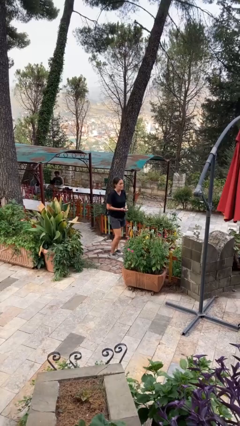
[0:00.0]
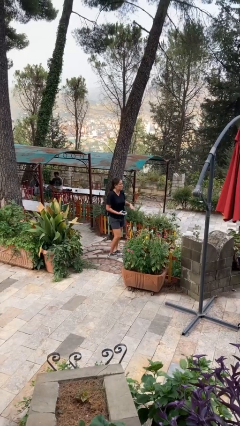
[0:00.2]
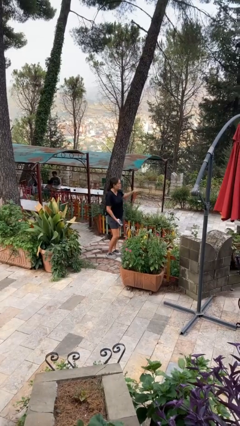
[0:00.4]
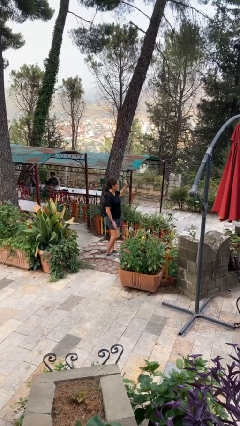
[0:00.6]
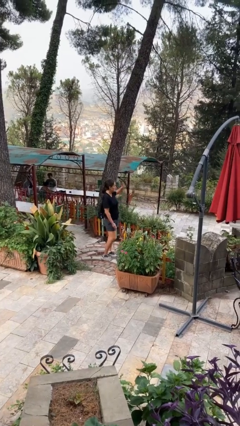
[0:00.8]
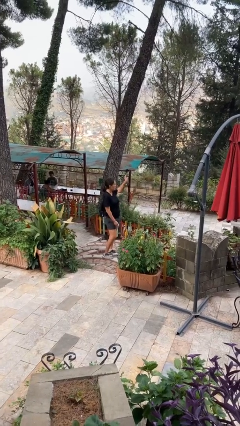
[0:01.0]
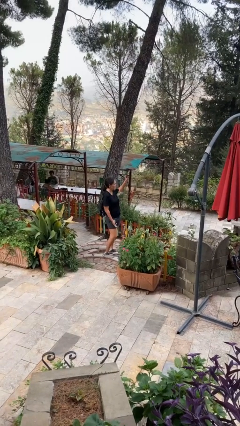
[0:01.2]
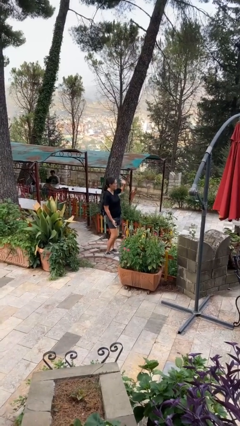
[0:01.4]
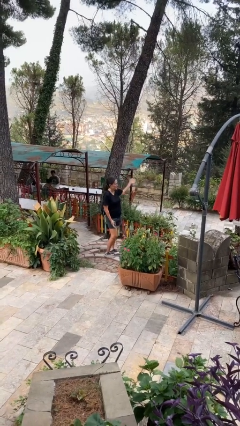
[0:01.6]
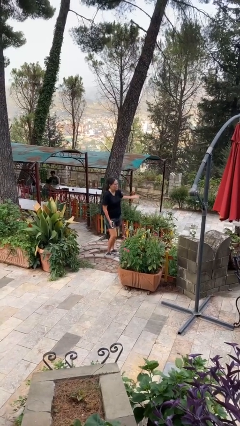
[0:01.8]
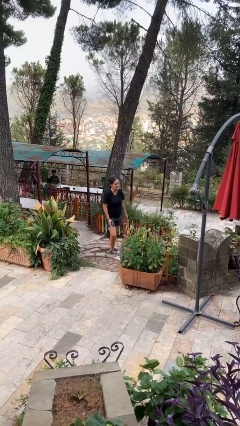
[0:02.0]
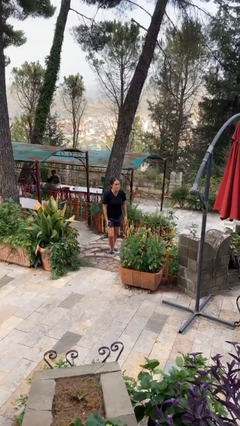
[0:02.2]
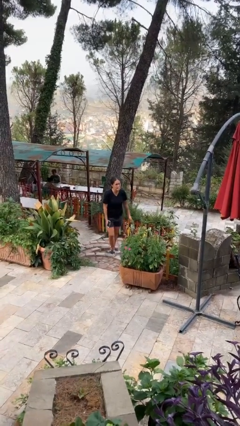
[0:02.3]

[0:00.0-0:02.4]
person waves at person

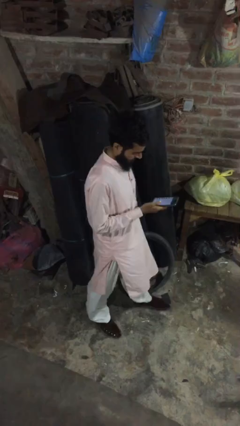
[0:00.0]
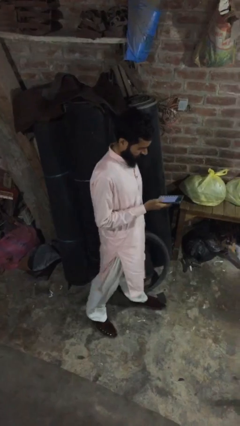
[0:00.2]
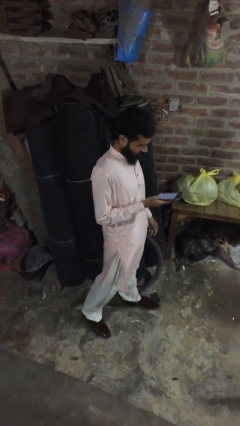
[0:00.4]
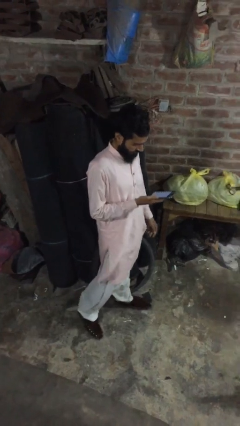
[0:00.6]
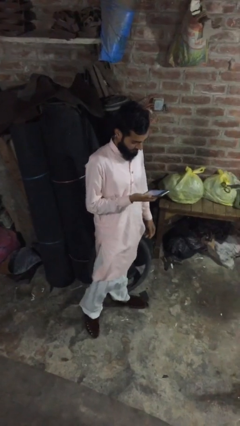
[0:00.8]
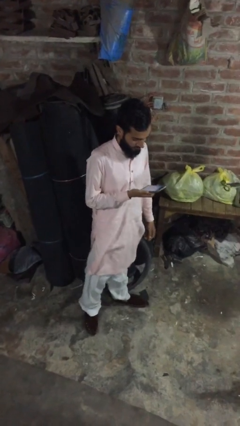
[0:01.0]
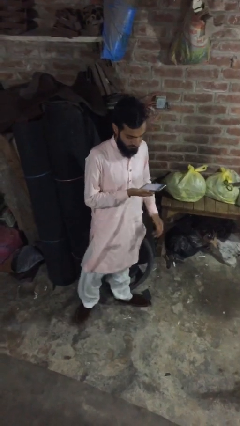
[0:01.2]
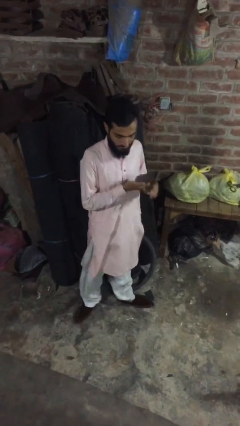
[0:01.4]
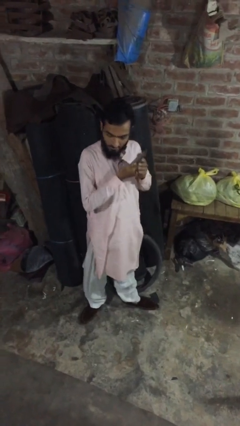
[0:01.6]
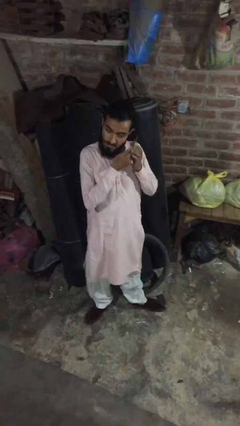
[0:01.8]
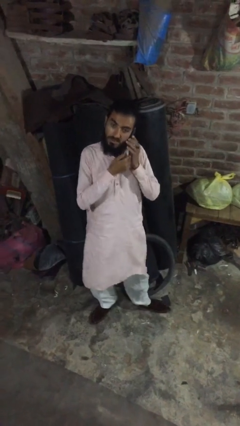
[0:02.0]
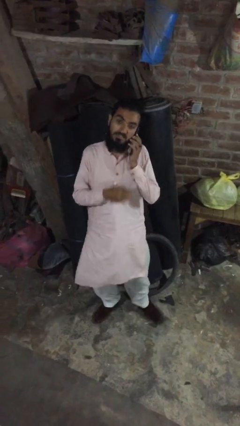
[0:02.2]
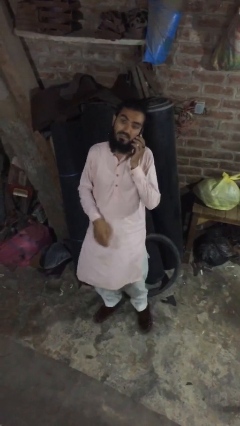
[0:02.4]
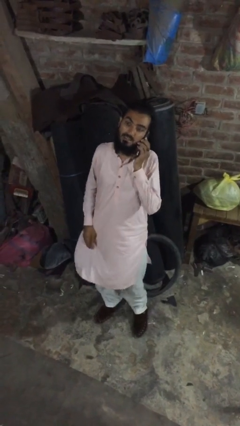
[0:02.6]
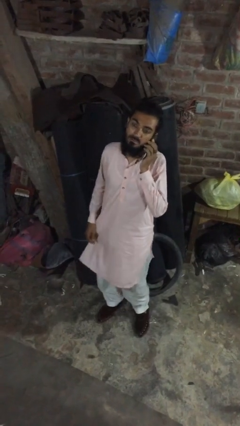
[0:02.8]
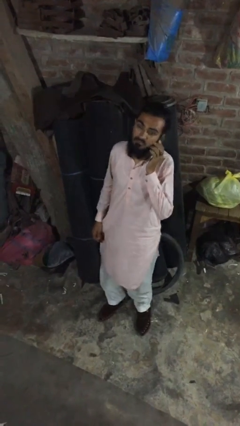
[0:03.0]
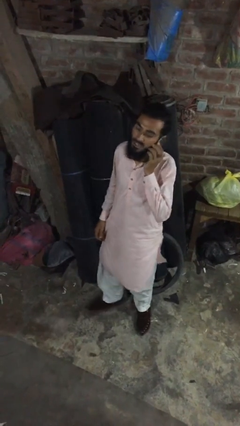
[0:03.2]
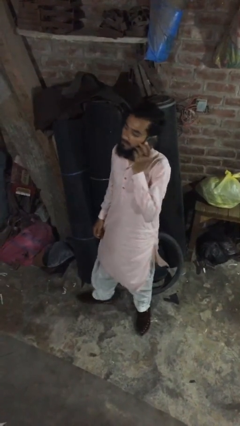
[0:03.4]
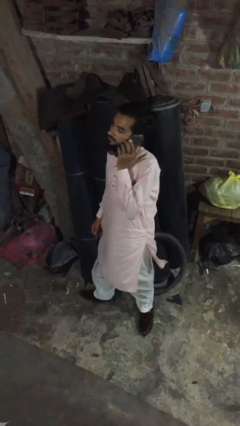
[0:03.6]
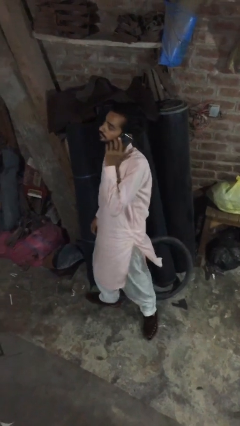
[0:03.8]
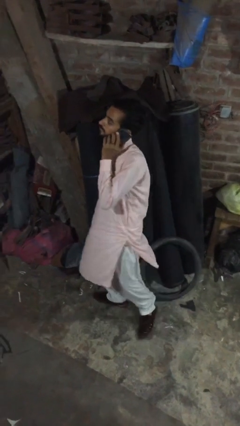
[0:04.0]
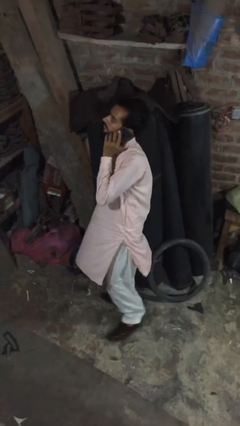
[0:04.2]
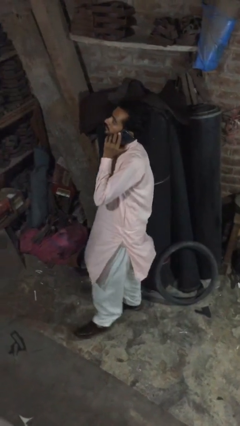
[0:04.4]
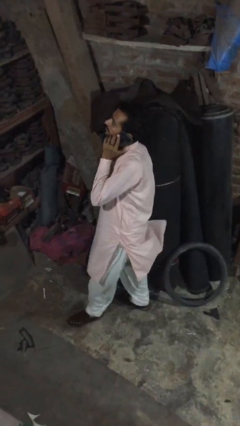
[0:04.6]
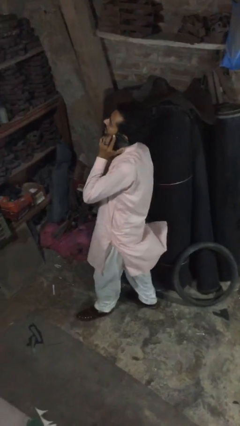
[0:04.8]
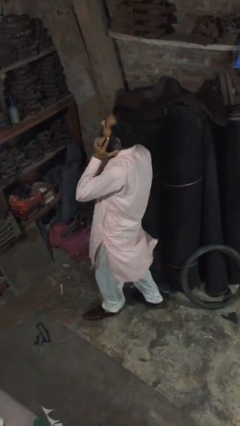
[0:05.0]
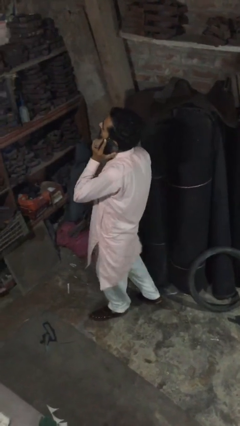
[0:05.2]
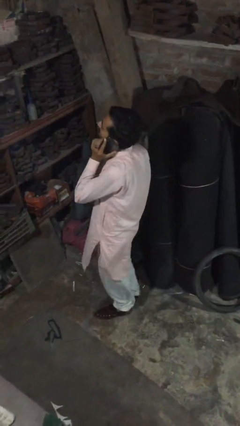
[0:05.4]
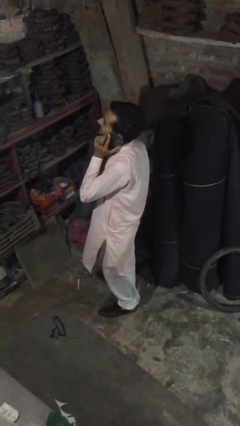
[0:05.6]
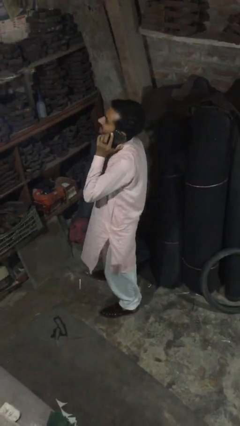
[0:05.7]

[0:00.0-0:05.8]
person talks on phone

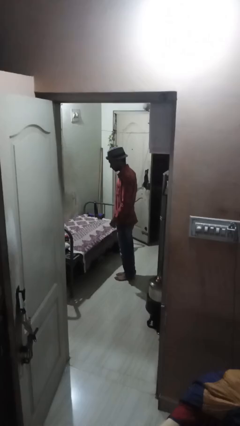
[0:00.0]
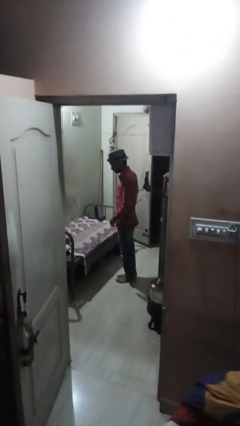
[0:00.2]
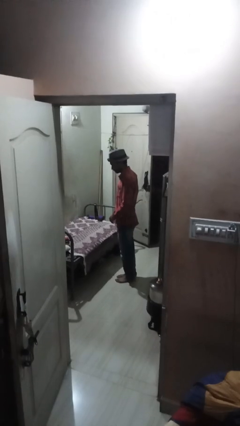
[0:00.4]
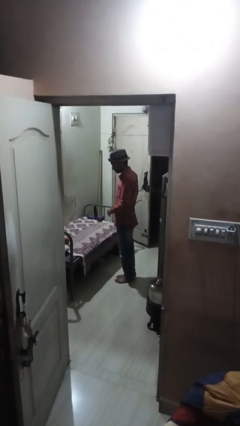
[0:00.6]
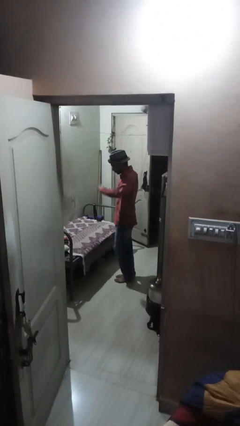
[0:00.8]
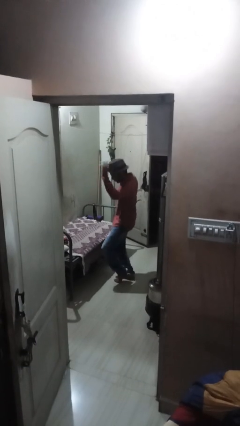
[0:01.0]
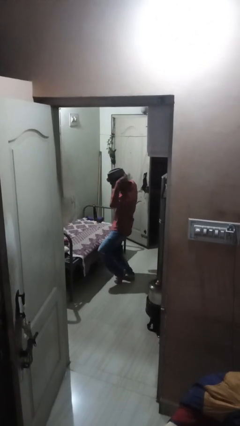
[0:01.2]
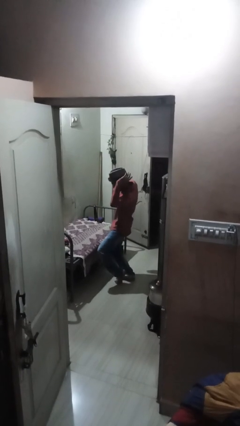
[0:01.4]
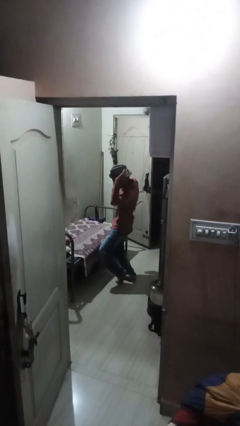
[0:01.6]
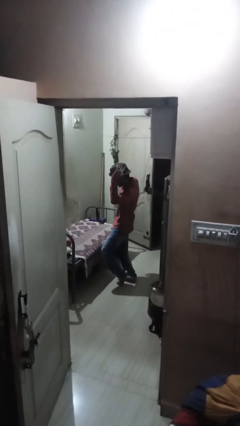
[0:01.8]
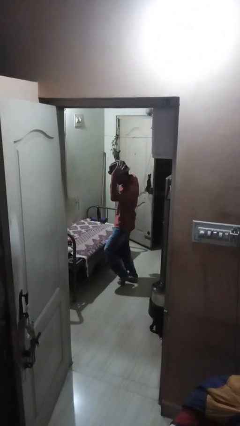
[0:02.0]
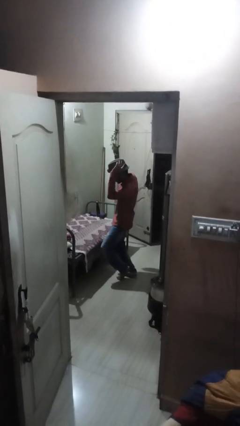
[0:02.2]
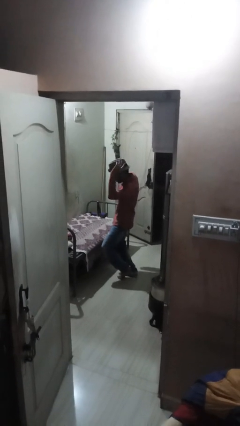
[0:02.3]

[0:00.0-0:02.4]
person dances in place

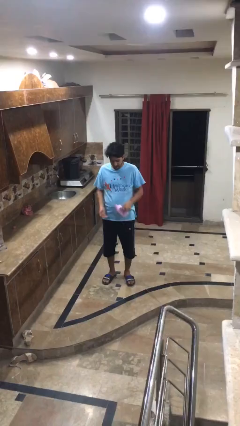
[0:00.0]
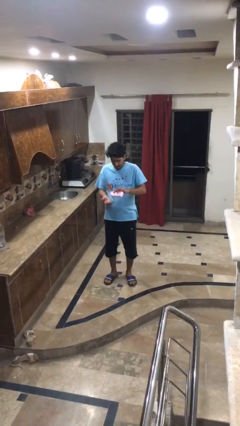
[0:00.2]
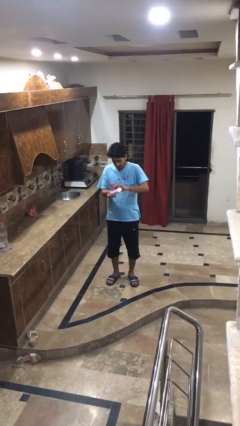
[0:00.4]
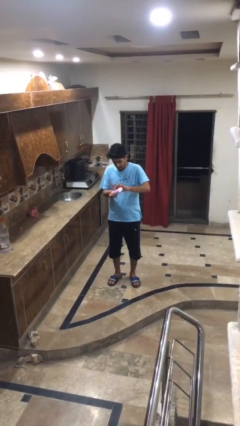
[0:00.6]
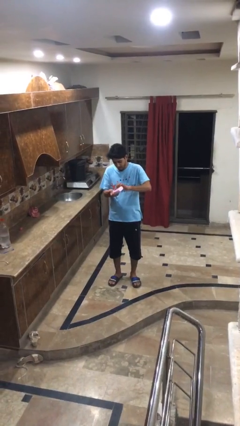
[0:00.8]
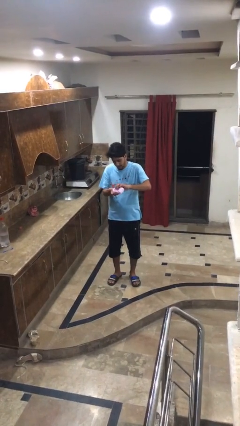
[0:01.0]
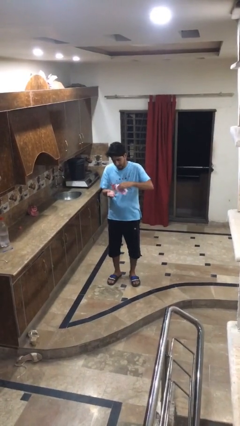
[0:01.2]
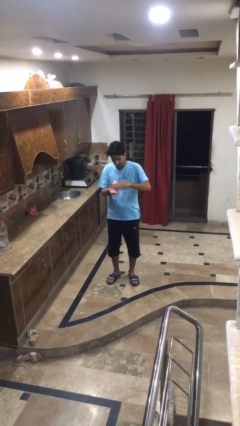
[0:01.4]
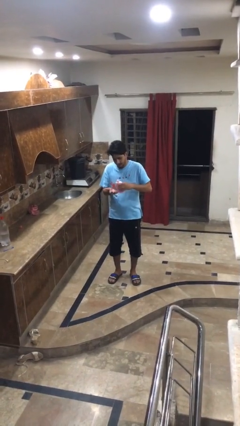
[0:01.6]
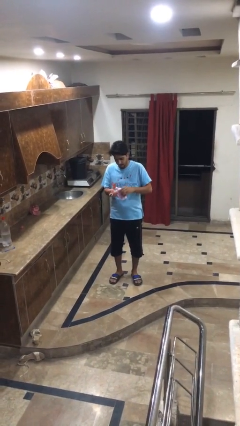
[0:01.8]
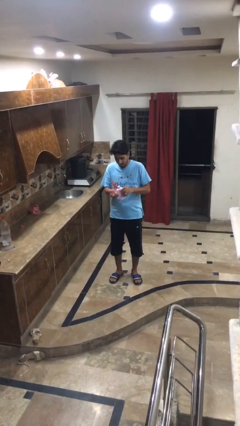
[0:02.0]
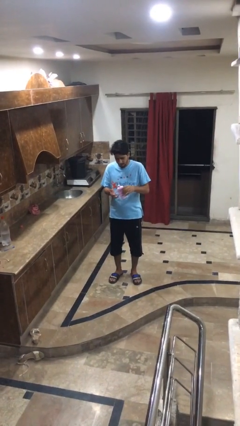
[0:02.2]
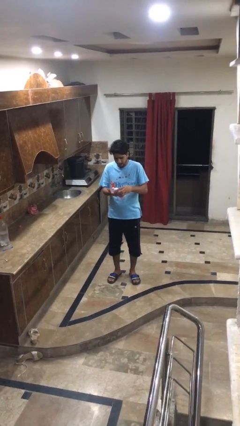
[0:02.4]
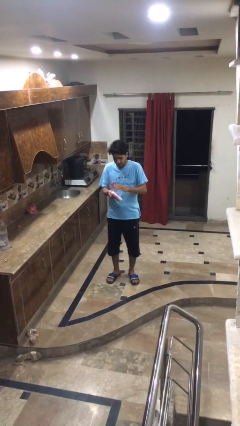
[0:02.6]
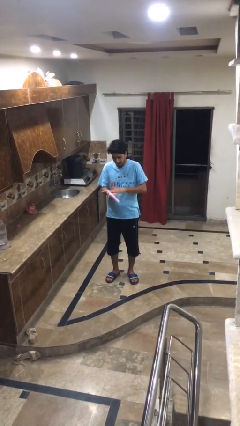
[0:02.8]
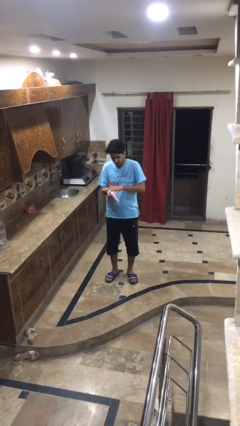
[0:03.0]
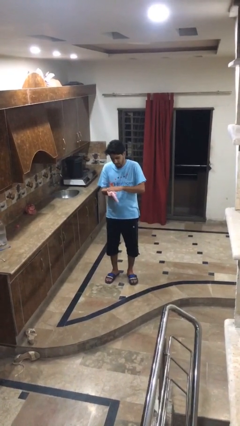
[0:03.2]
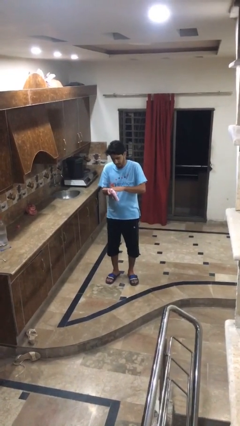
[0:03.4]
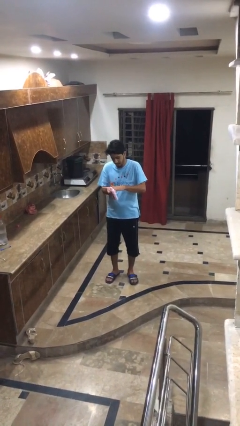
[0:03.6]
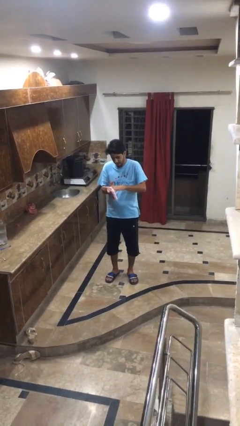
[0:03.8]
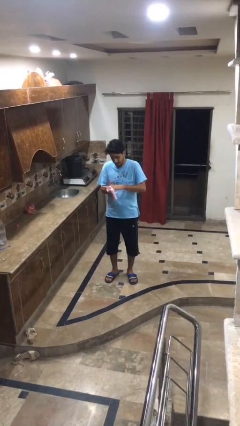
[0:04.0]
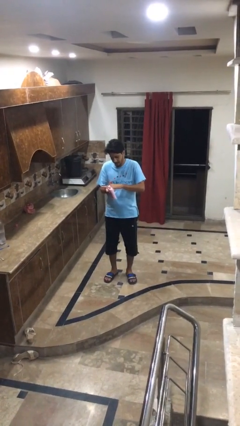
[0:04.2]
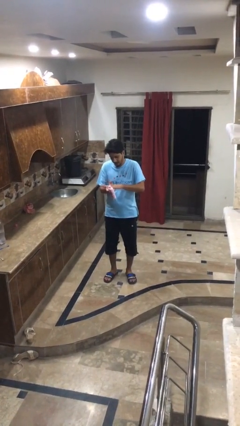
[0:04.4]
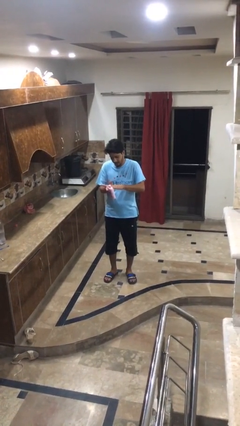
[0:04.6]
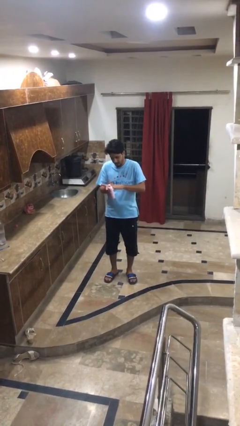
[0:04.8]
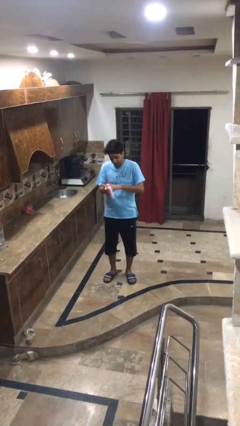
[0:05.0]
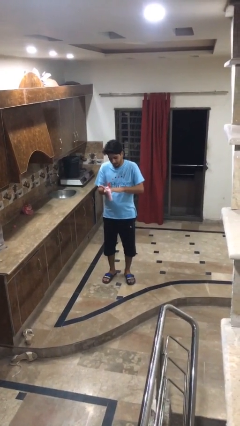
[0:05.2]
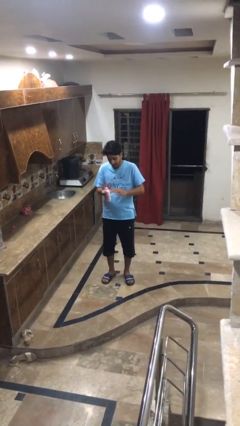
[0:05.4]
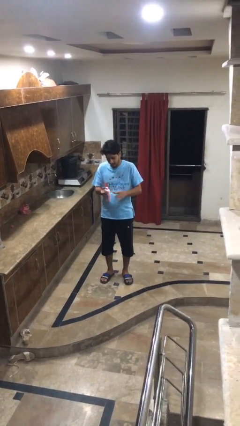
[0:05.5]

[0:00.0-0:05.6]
person applies sunscreen

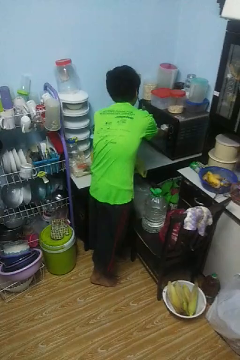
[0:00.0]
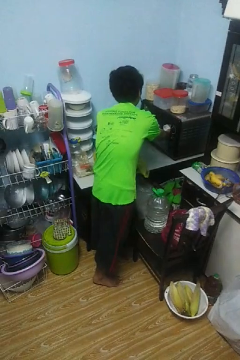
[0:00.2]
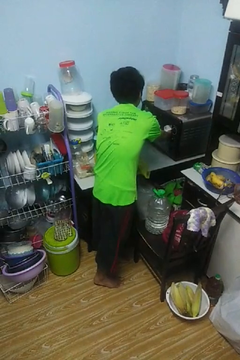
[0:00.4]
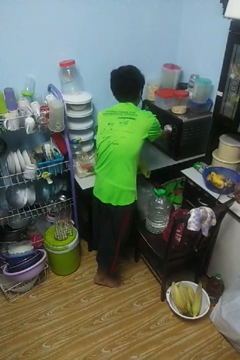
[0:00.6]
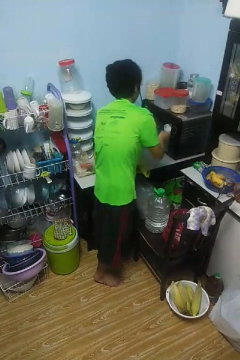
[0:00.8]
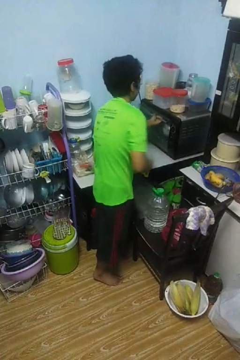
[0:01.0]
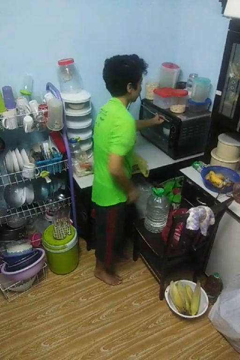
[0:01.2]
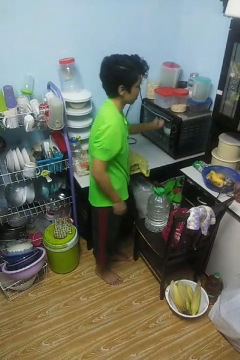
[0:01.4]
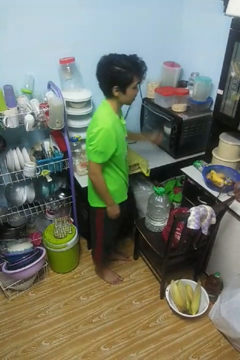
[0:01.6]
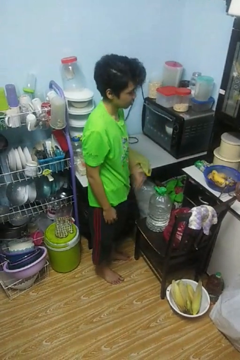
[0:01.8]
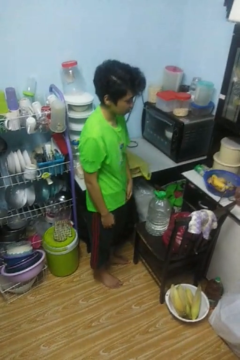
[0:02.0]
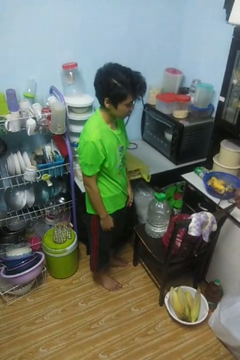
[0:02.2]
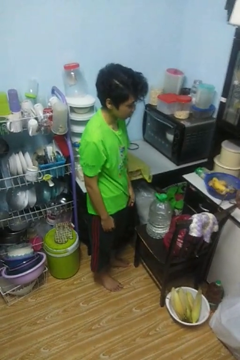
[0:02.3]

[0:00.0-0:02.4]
person closes microwave
